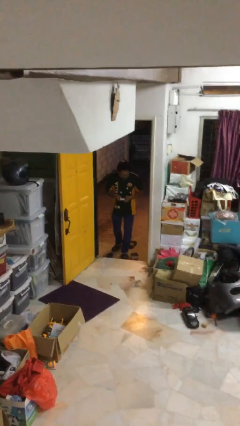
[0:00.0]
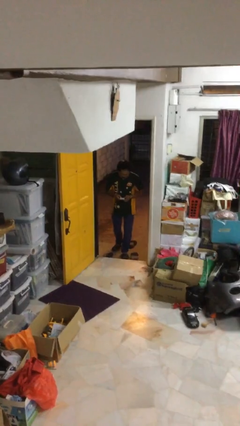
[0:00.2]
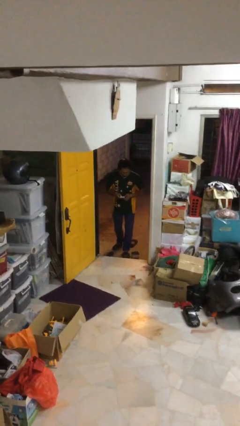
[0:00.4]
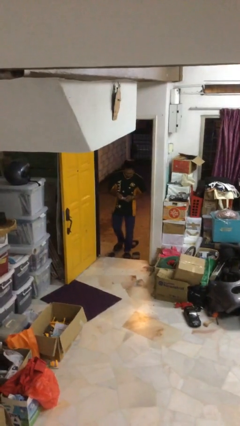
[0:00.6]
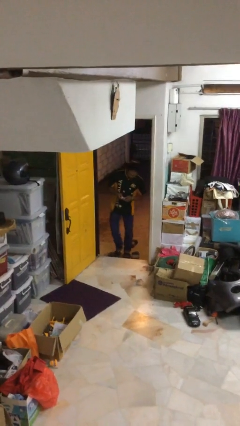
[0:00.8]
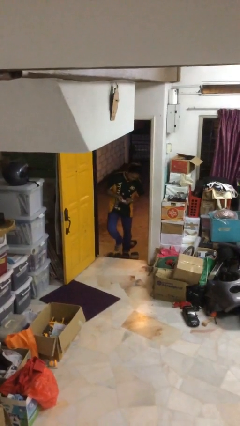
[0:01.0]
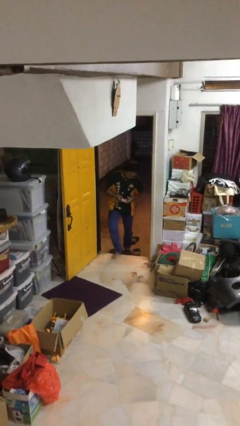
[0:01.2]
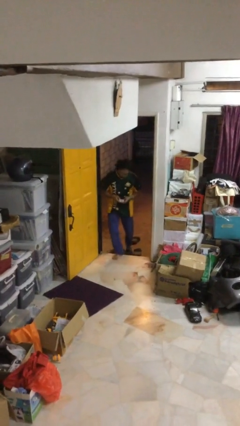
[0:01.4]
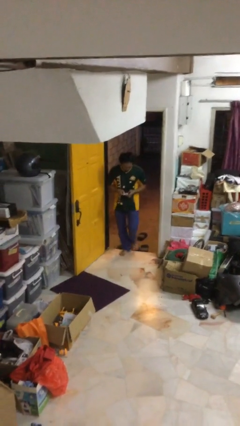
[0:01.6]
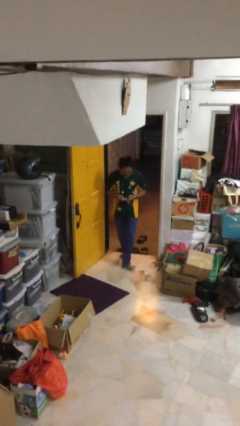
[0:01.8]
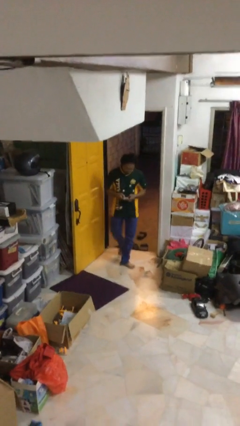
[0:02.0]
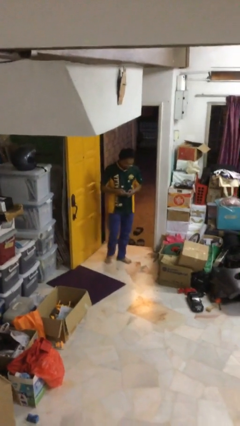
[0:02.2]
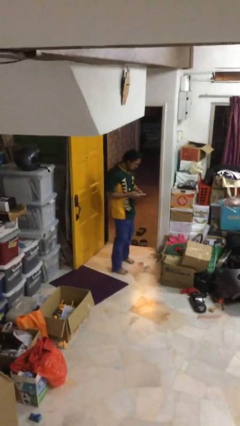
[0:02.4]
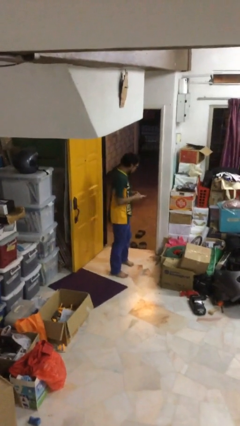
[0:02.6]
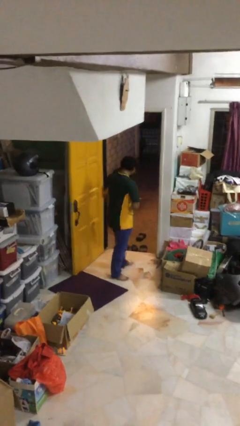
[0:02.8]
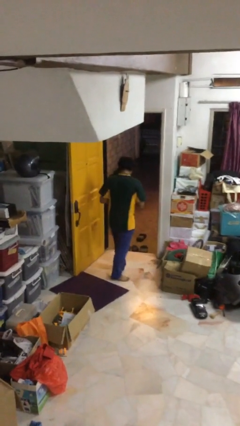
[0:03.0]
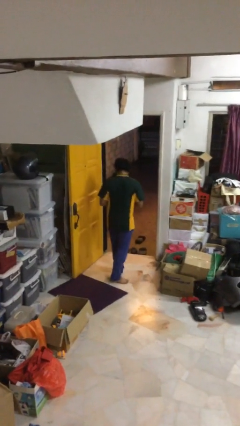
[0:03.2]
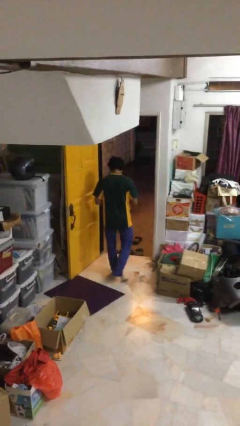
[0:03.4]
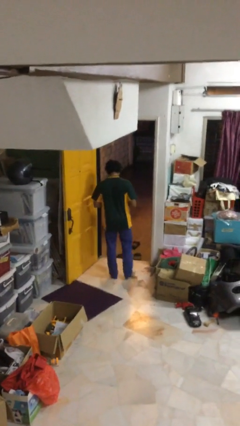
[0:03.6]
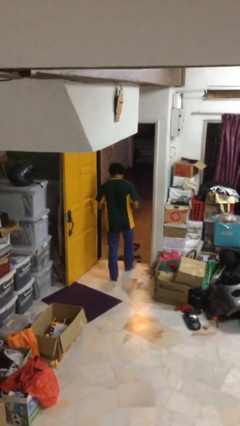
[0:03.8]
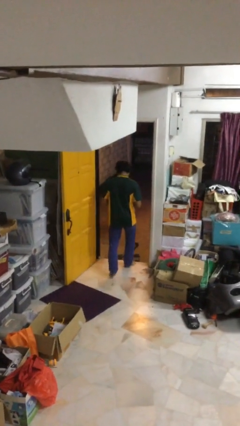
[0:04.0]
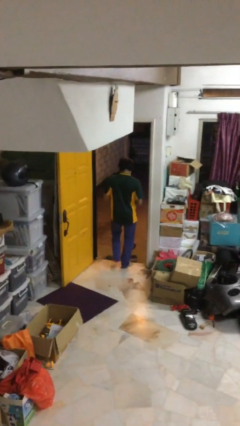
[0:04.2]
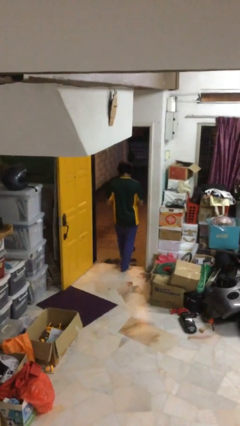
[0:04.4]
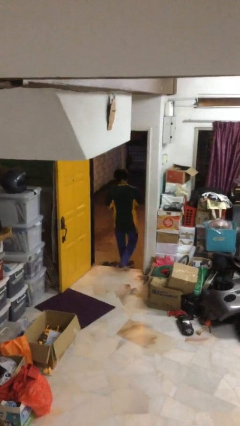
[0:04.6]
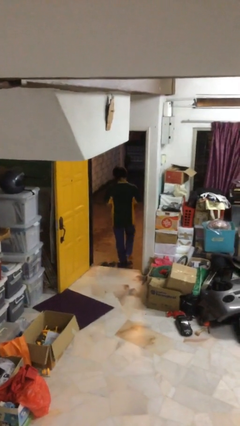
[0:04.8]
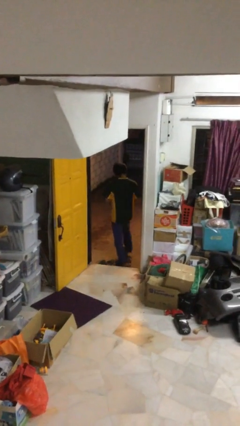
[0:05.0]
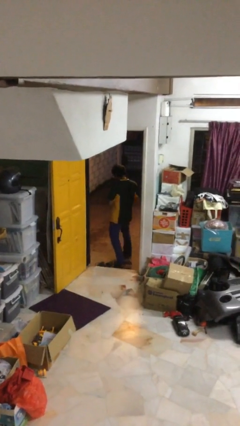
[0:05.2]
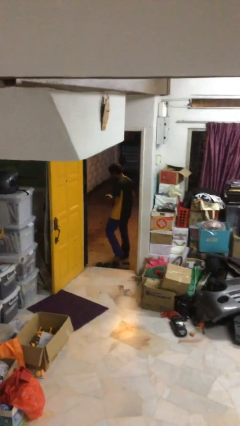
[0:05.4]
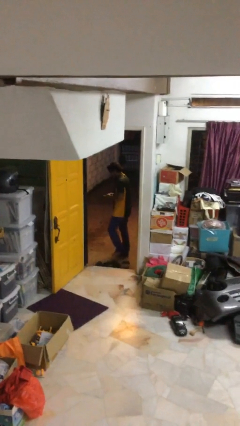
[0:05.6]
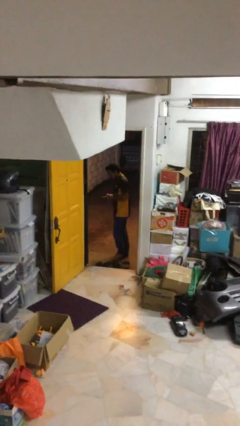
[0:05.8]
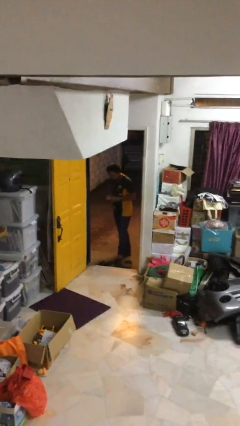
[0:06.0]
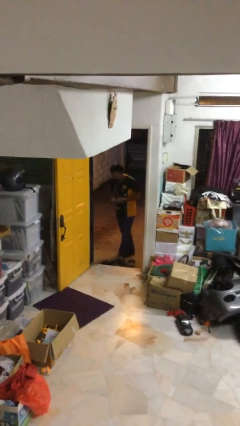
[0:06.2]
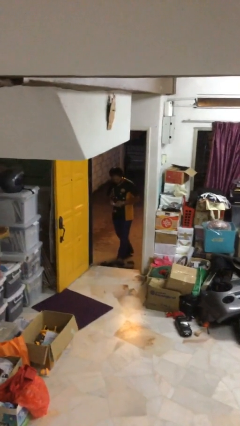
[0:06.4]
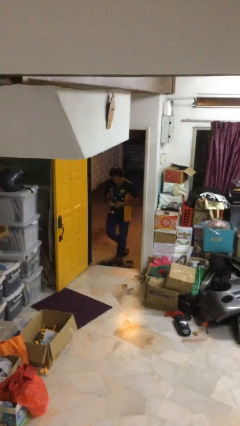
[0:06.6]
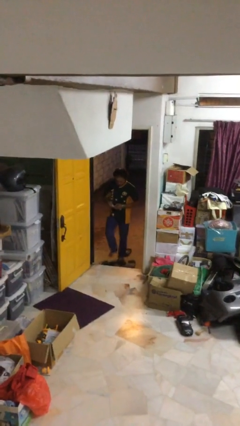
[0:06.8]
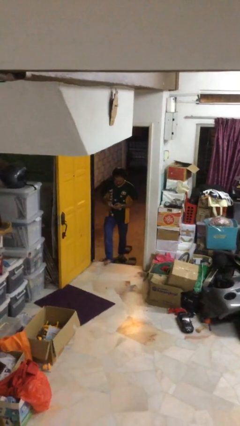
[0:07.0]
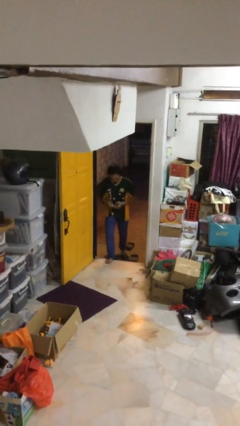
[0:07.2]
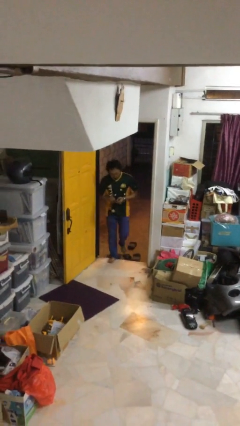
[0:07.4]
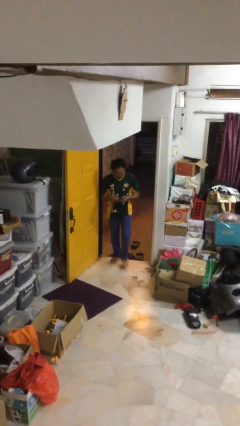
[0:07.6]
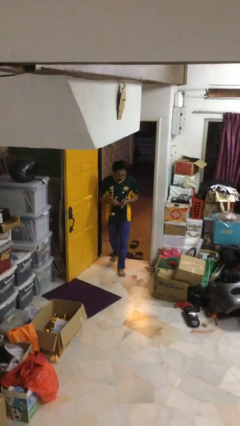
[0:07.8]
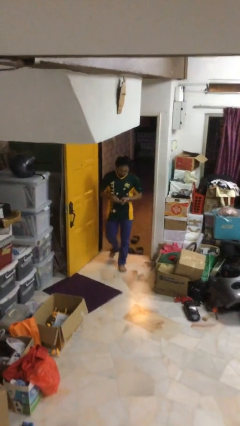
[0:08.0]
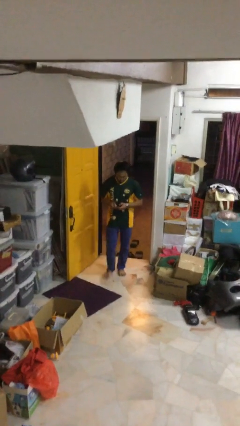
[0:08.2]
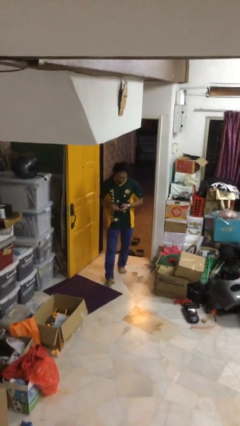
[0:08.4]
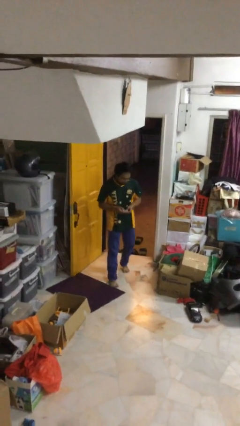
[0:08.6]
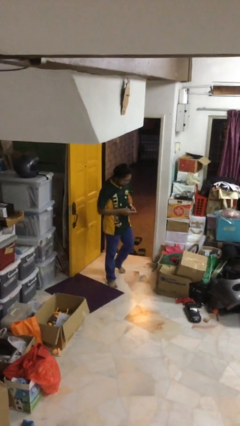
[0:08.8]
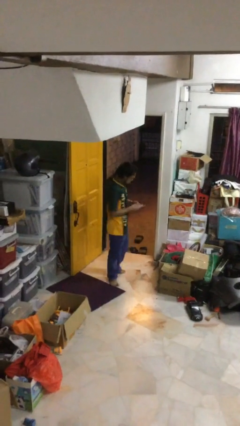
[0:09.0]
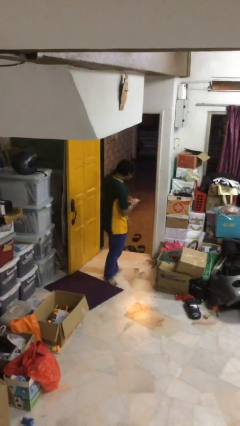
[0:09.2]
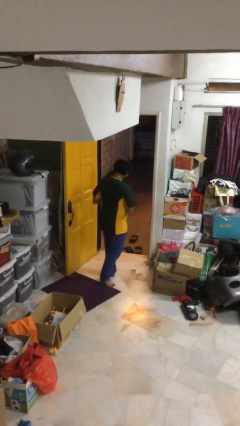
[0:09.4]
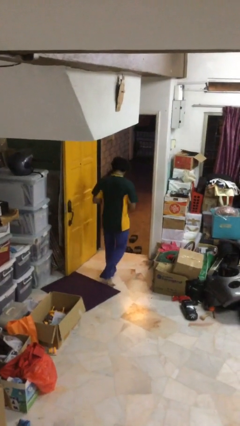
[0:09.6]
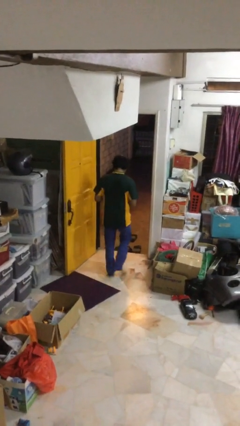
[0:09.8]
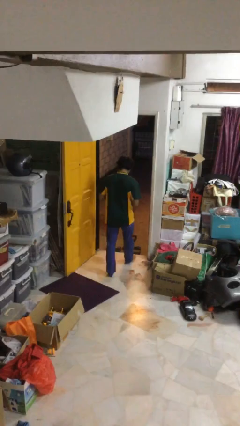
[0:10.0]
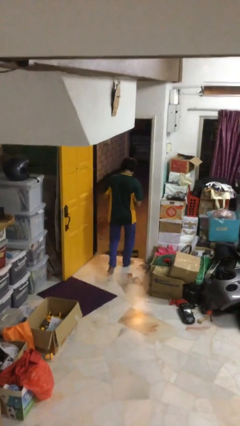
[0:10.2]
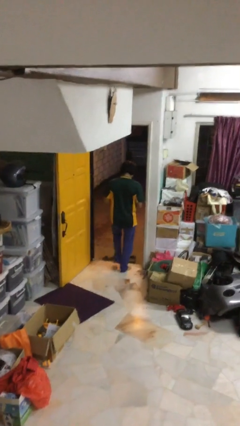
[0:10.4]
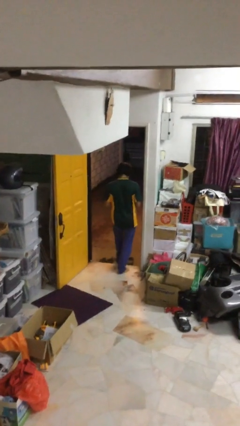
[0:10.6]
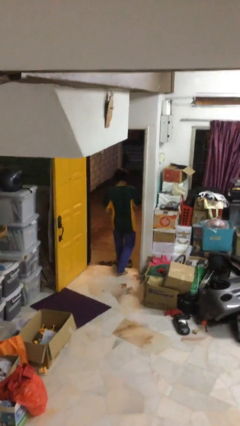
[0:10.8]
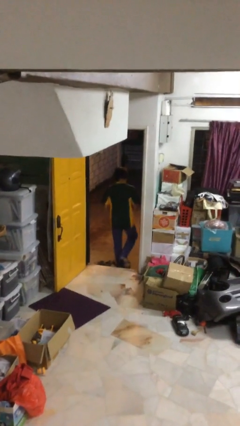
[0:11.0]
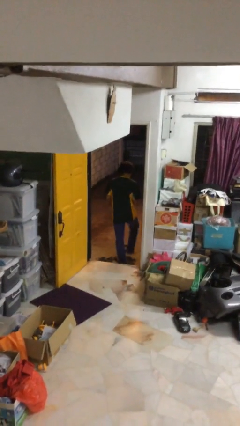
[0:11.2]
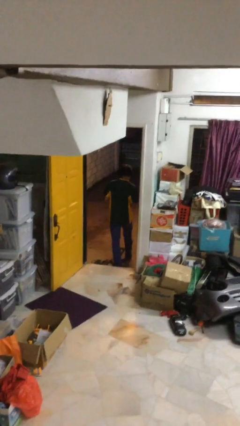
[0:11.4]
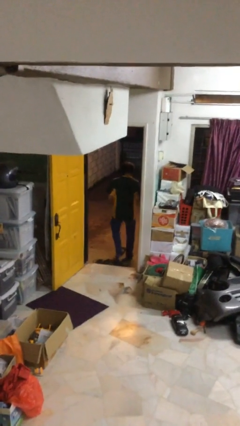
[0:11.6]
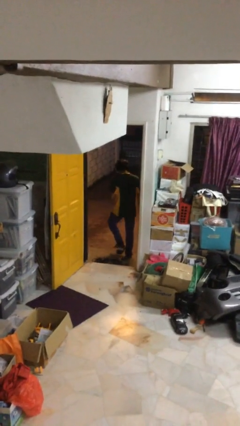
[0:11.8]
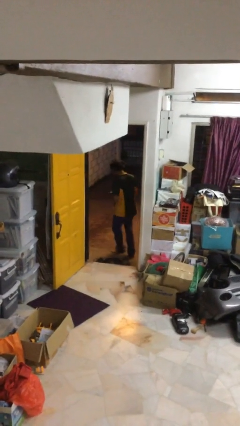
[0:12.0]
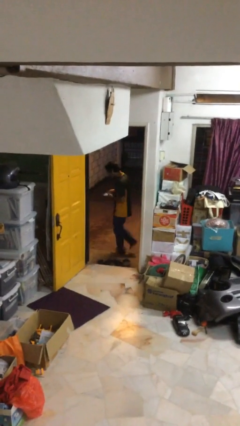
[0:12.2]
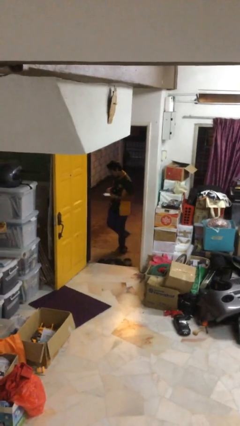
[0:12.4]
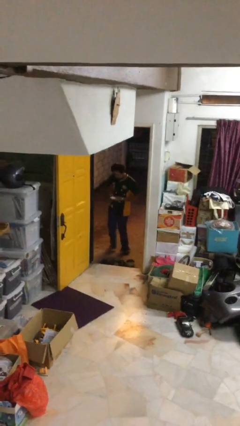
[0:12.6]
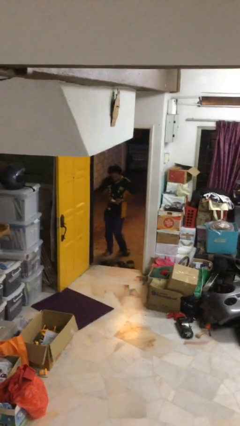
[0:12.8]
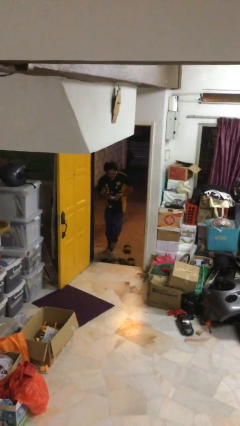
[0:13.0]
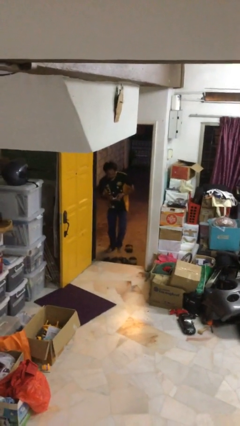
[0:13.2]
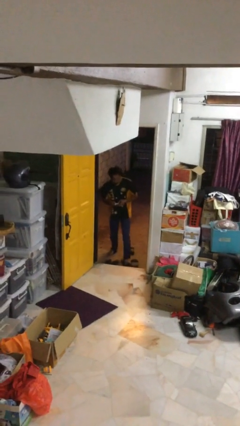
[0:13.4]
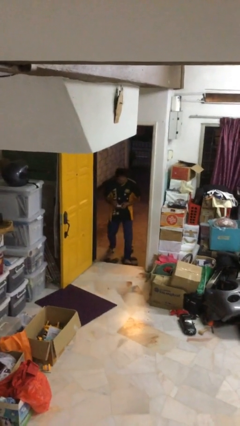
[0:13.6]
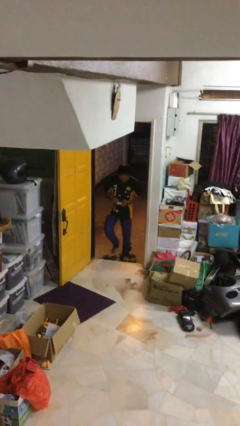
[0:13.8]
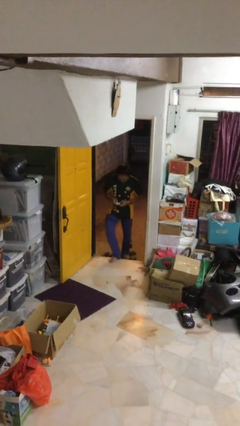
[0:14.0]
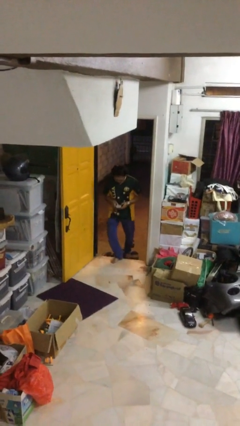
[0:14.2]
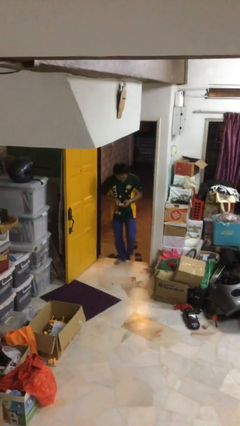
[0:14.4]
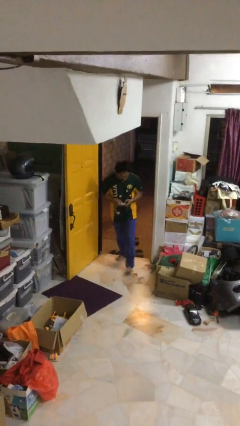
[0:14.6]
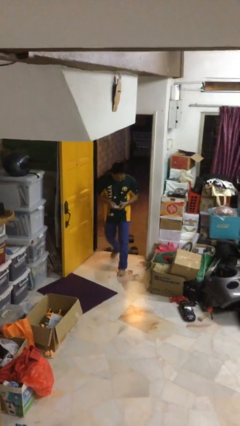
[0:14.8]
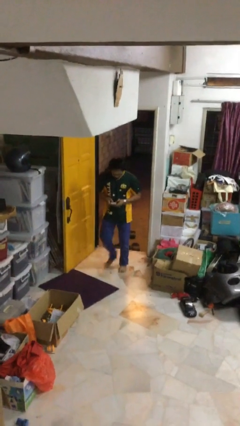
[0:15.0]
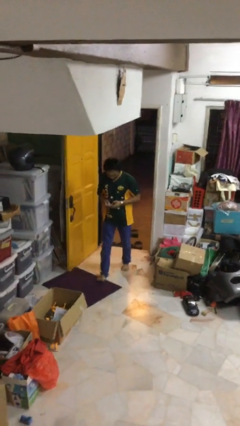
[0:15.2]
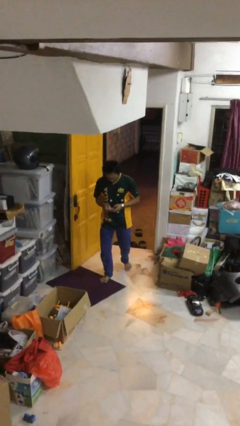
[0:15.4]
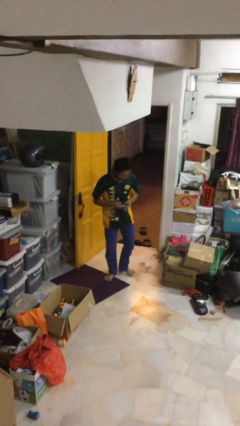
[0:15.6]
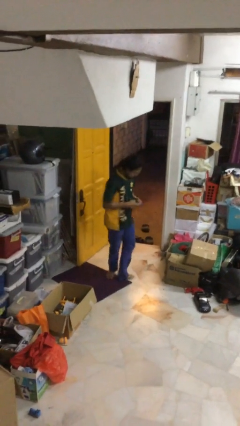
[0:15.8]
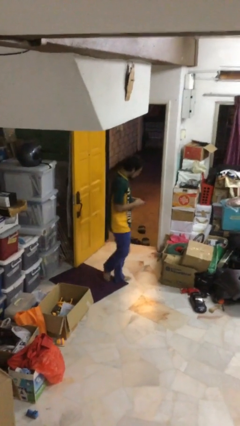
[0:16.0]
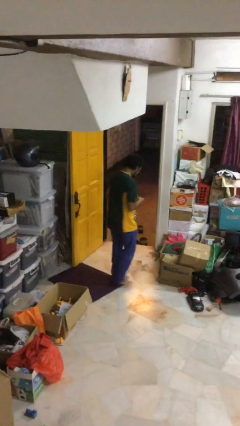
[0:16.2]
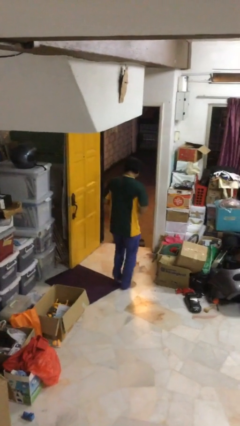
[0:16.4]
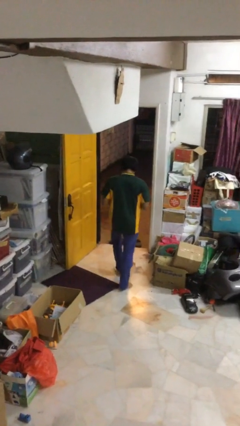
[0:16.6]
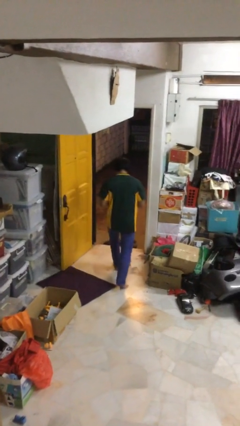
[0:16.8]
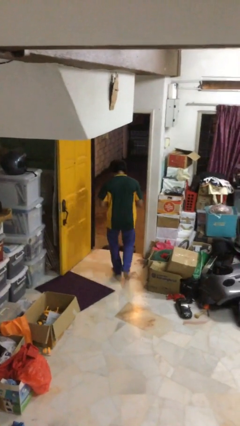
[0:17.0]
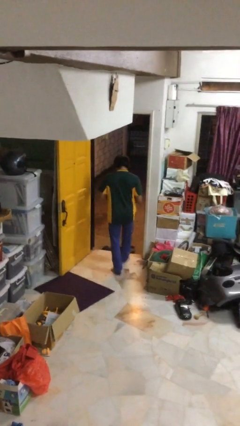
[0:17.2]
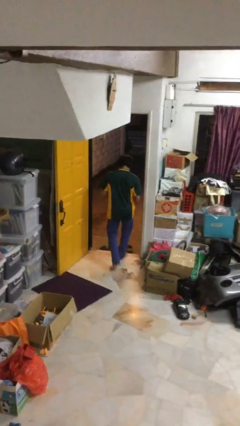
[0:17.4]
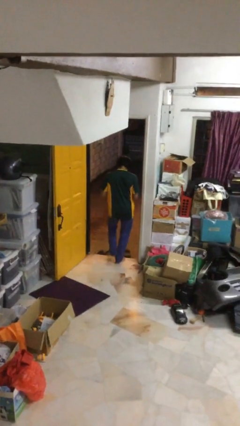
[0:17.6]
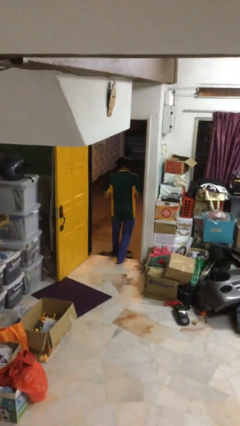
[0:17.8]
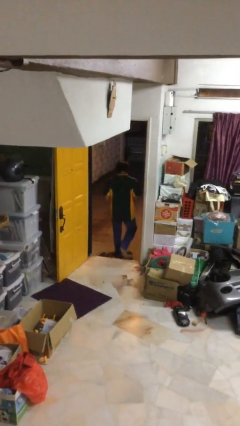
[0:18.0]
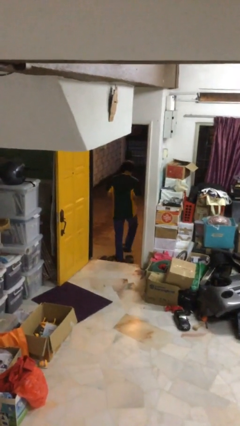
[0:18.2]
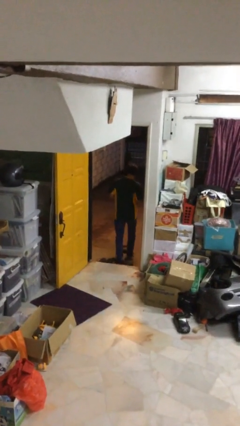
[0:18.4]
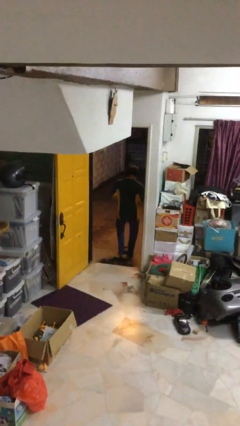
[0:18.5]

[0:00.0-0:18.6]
person texts on phone
